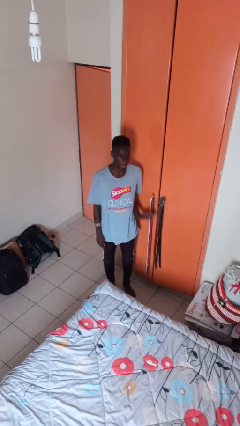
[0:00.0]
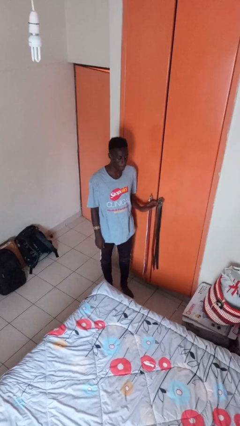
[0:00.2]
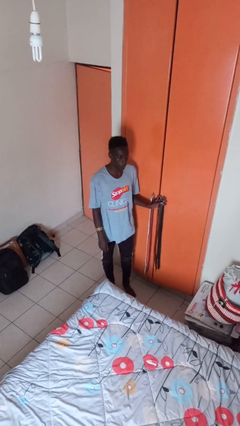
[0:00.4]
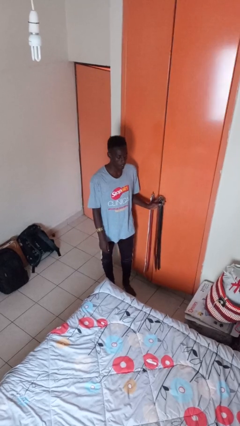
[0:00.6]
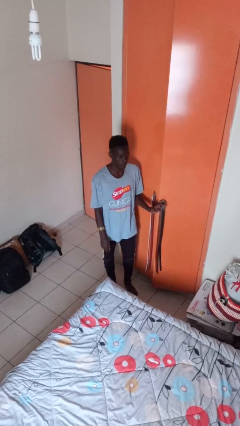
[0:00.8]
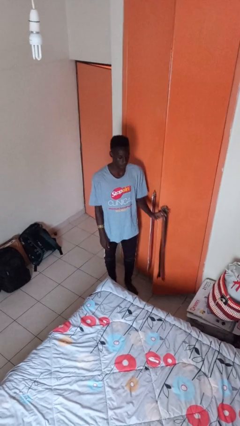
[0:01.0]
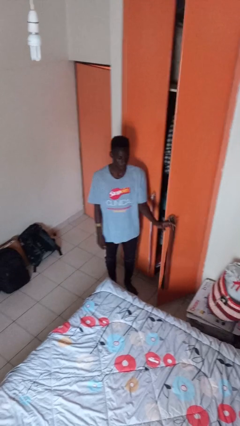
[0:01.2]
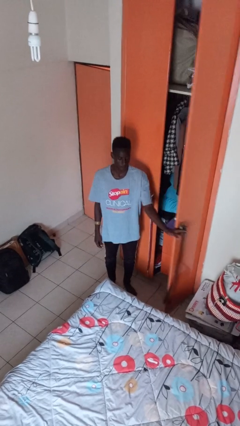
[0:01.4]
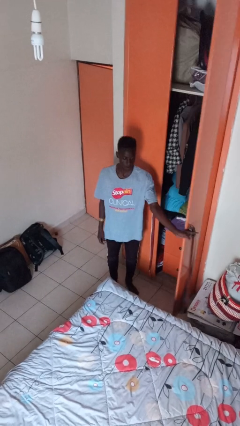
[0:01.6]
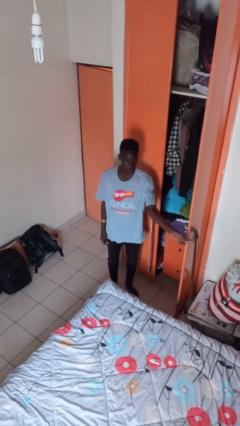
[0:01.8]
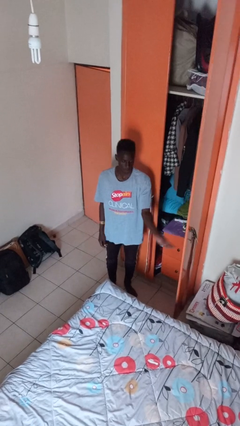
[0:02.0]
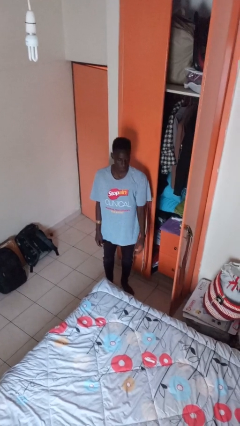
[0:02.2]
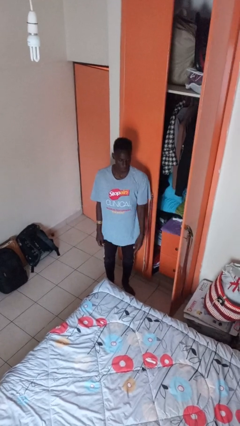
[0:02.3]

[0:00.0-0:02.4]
person opens closet door

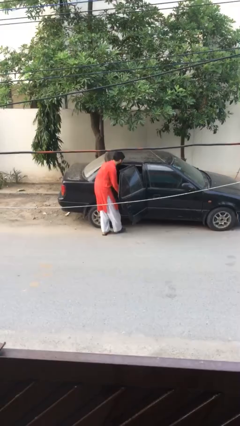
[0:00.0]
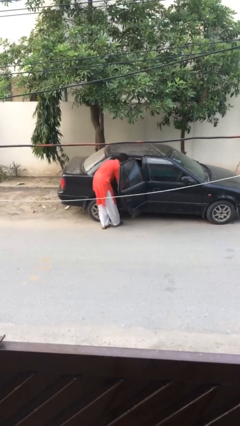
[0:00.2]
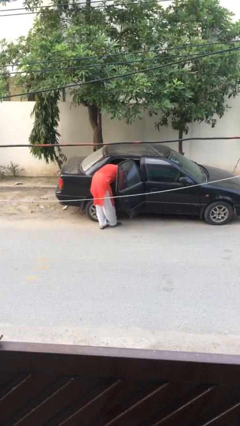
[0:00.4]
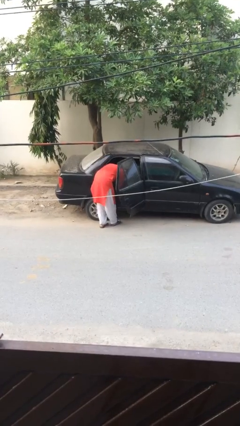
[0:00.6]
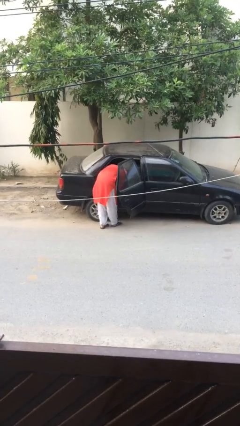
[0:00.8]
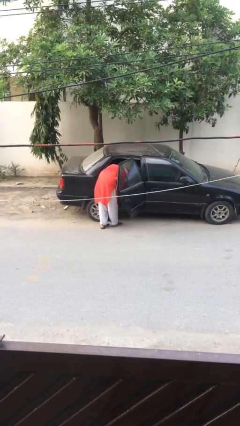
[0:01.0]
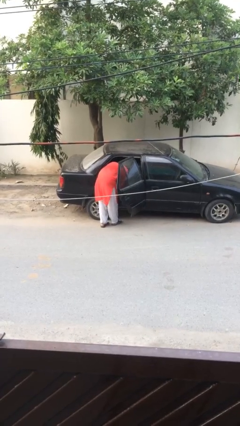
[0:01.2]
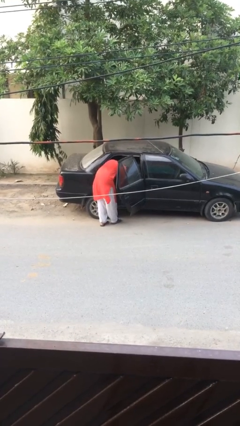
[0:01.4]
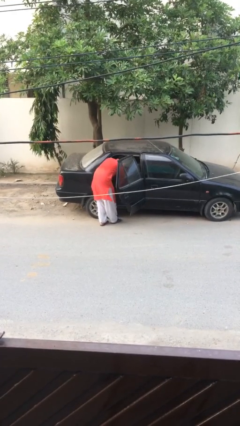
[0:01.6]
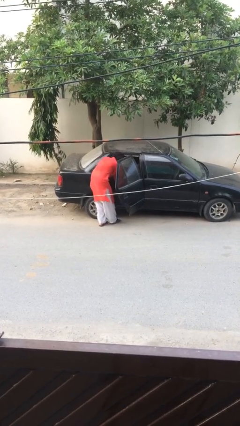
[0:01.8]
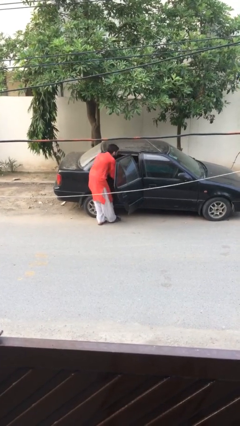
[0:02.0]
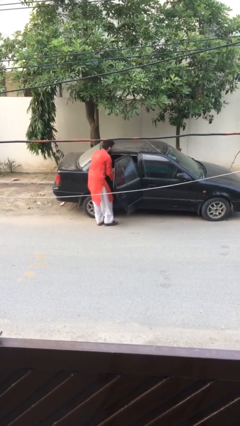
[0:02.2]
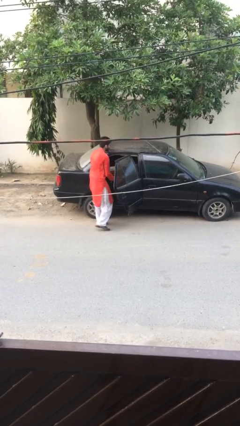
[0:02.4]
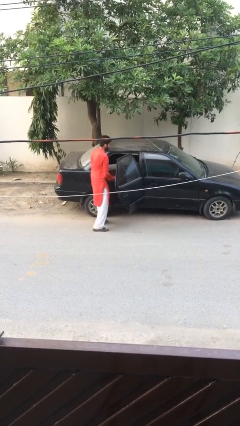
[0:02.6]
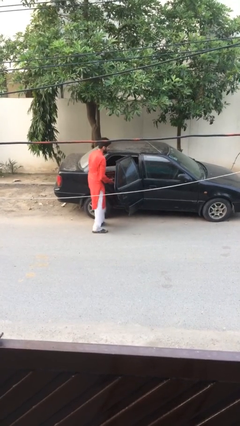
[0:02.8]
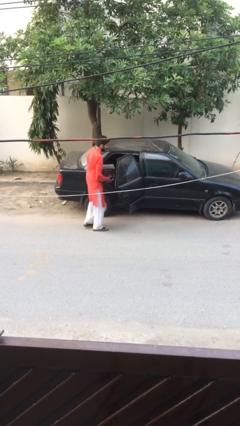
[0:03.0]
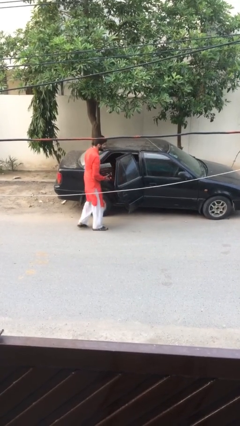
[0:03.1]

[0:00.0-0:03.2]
person unloads car

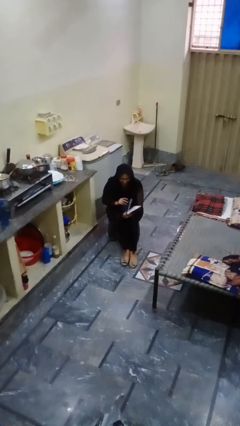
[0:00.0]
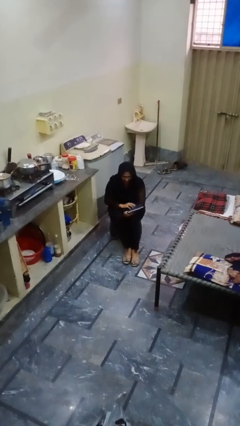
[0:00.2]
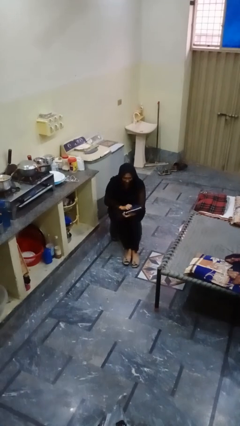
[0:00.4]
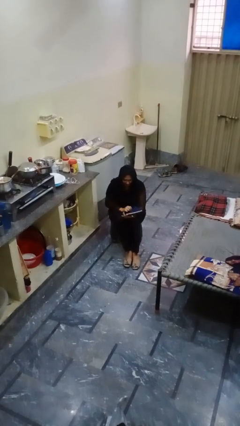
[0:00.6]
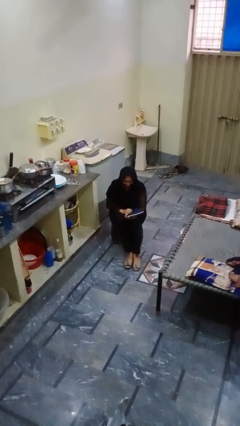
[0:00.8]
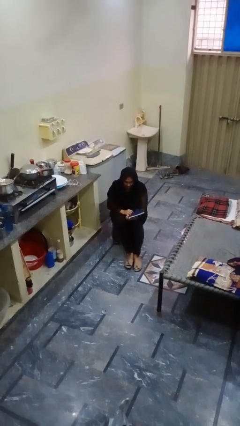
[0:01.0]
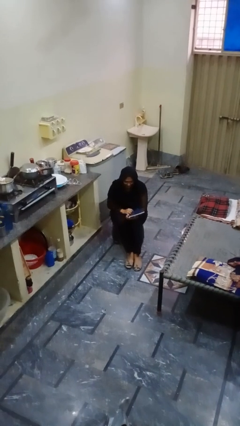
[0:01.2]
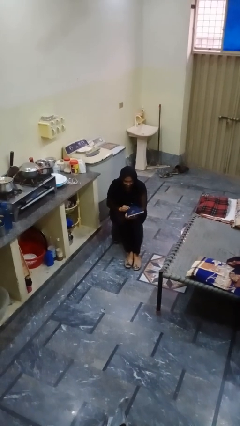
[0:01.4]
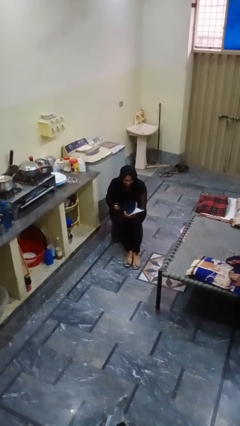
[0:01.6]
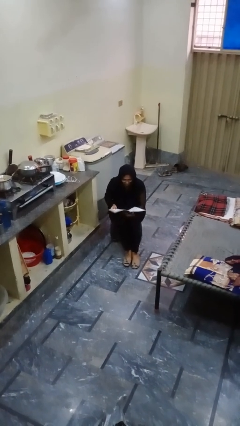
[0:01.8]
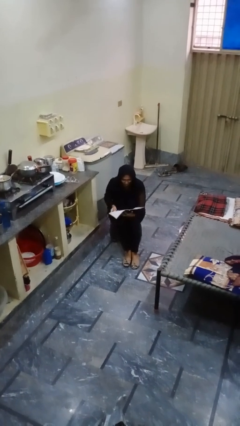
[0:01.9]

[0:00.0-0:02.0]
person reads magazine

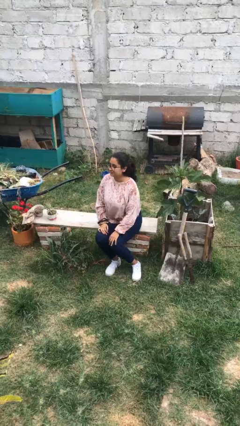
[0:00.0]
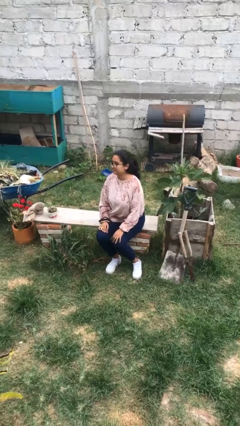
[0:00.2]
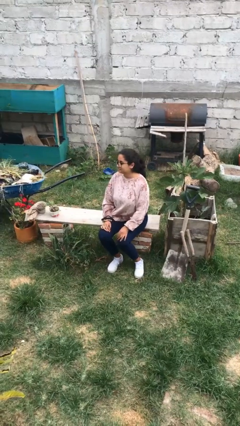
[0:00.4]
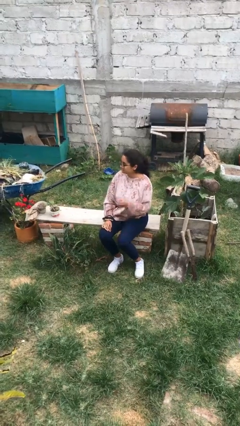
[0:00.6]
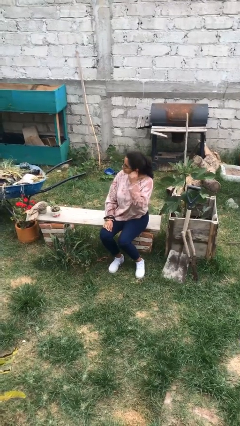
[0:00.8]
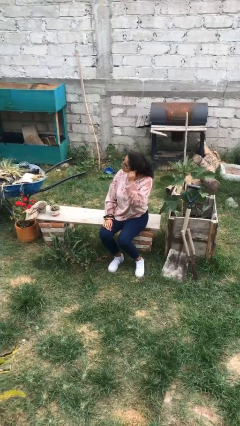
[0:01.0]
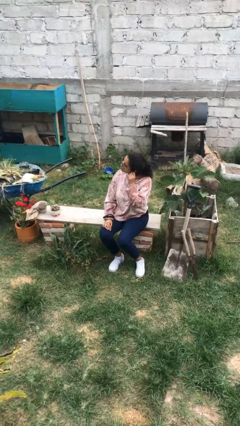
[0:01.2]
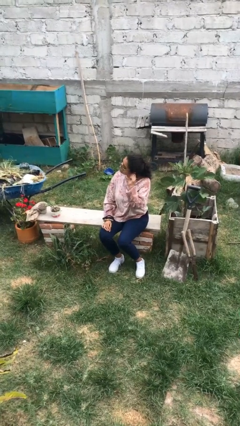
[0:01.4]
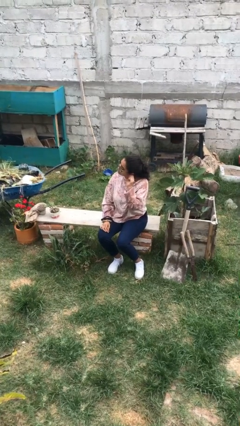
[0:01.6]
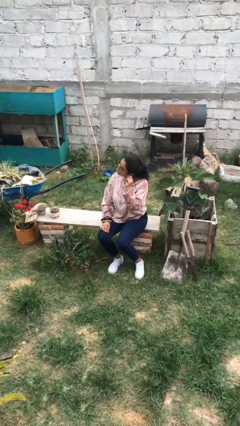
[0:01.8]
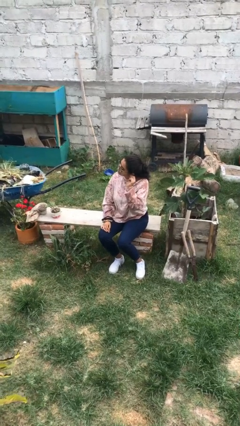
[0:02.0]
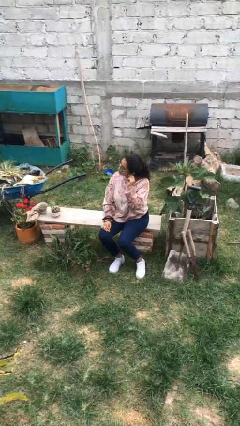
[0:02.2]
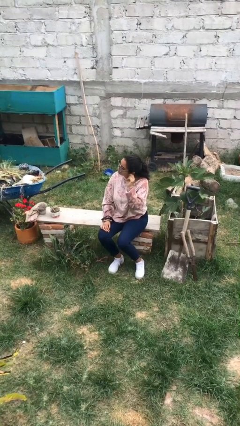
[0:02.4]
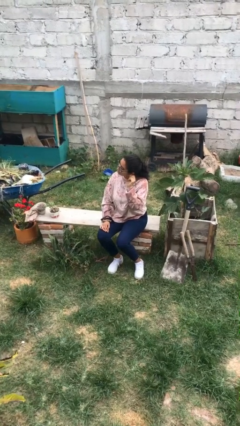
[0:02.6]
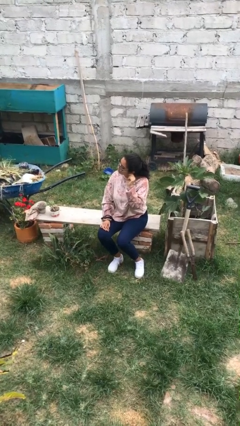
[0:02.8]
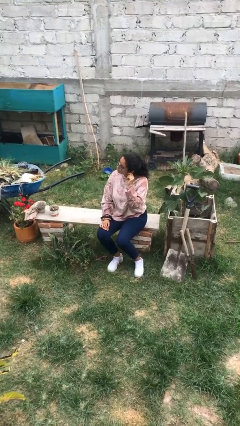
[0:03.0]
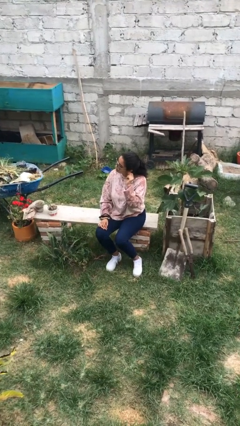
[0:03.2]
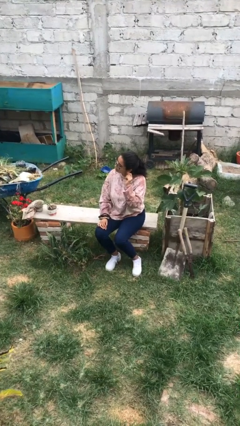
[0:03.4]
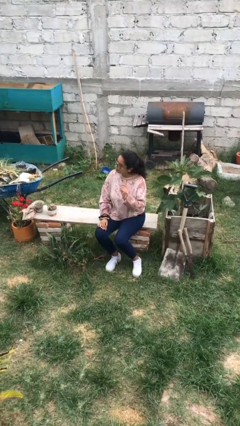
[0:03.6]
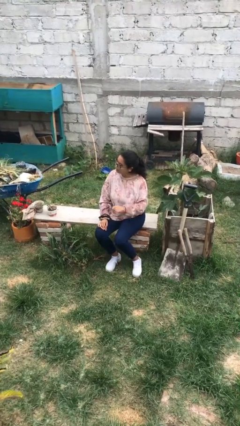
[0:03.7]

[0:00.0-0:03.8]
person touches earlobe

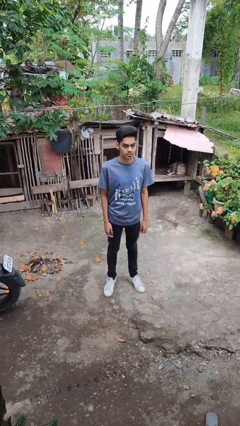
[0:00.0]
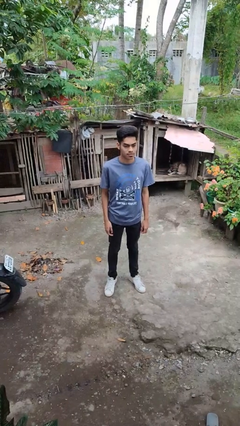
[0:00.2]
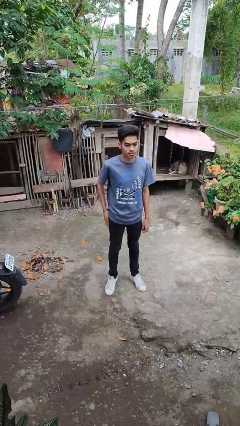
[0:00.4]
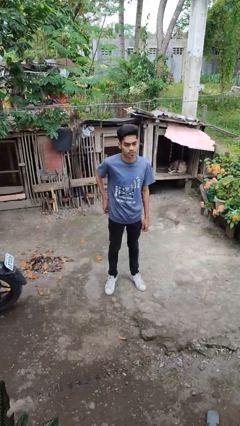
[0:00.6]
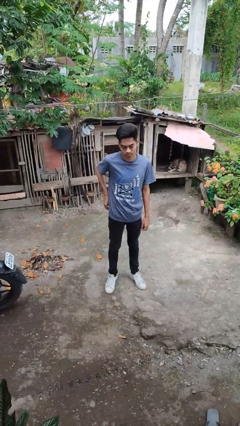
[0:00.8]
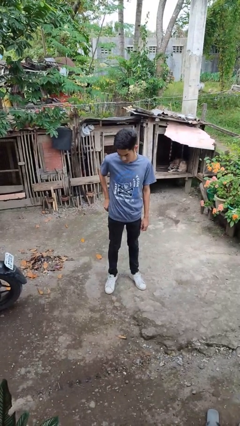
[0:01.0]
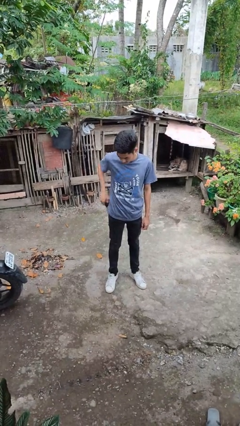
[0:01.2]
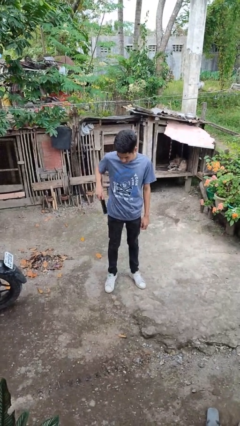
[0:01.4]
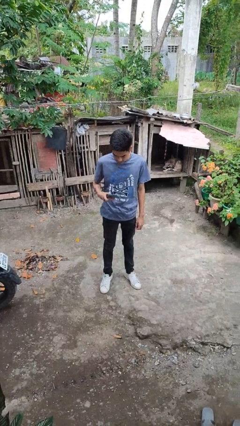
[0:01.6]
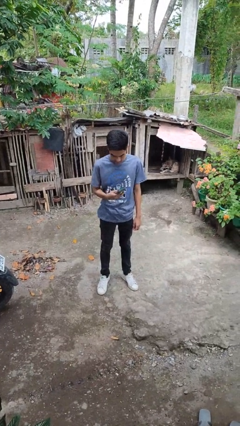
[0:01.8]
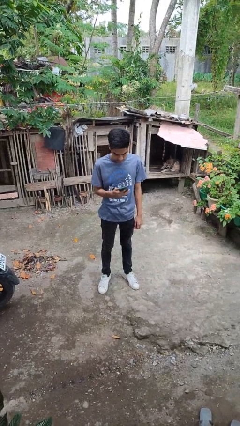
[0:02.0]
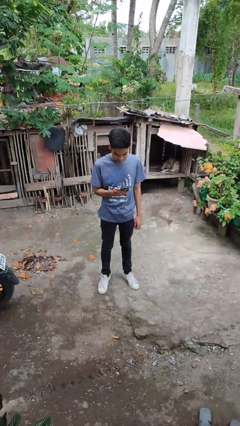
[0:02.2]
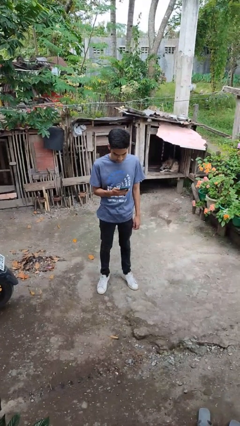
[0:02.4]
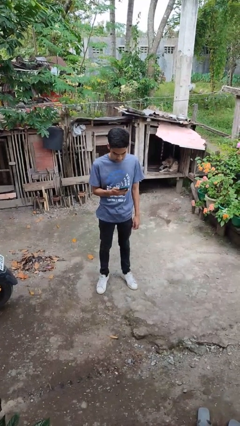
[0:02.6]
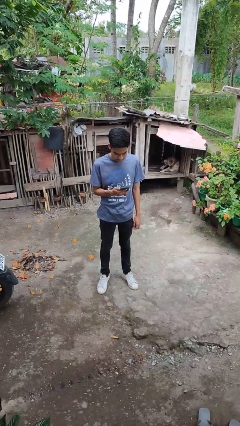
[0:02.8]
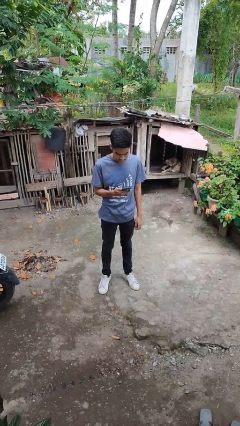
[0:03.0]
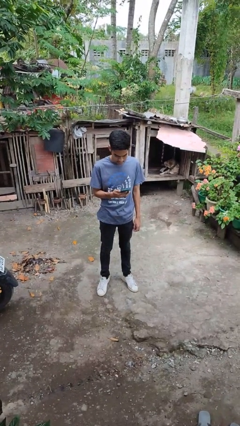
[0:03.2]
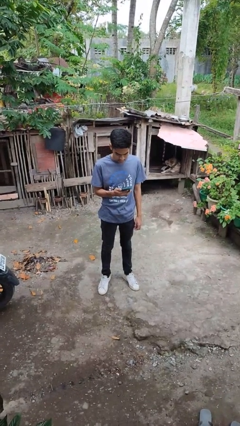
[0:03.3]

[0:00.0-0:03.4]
person takes phone from pocket

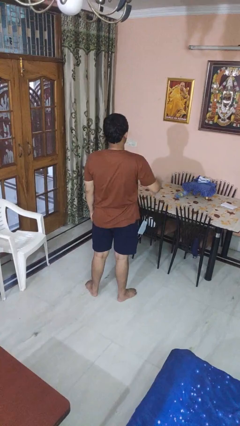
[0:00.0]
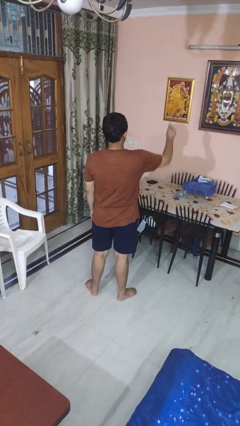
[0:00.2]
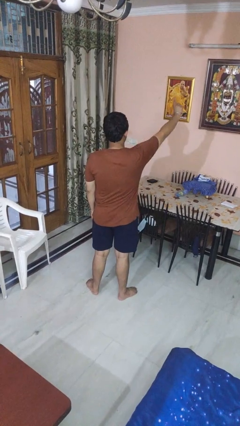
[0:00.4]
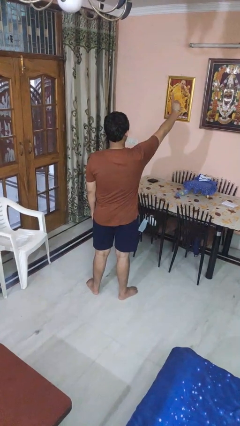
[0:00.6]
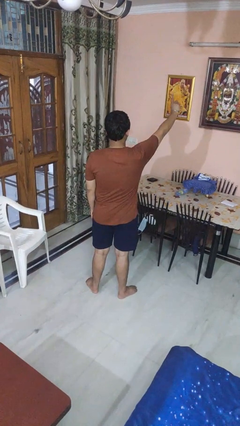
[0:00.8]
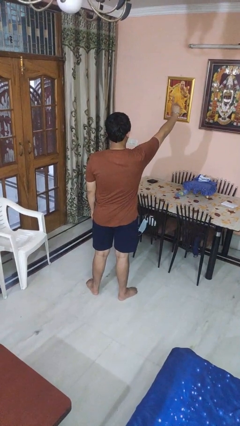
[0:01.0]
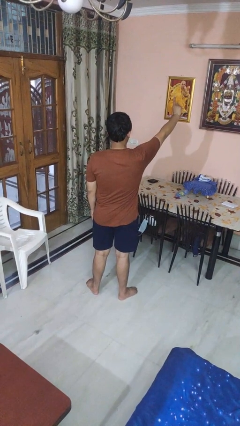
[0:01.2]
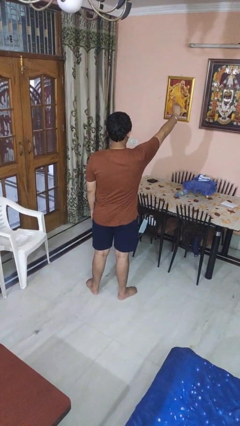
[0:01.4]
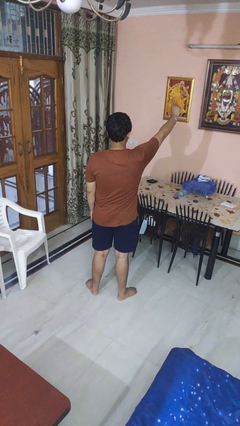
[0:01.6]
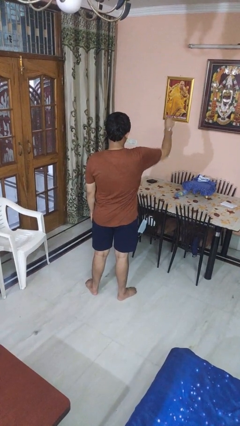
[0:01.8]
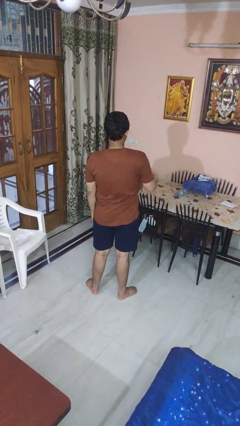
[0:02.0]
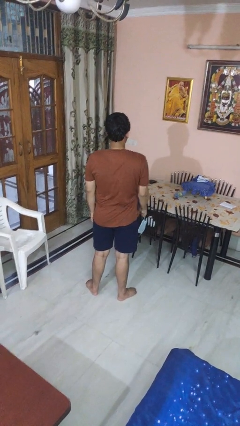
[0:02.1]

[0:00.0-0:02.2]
person gestures number one

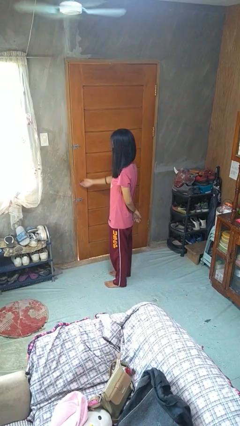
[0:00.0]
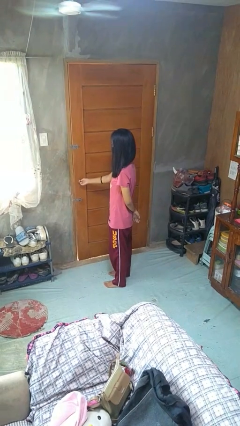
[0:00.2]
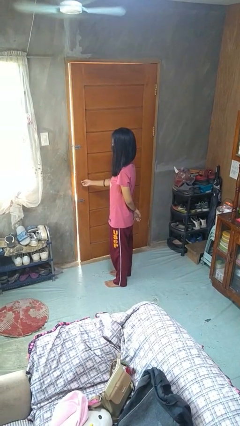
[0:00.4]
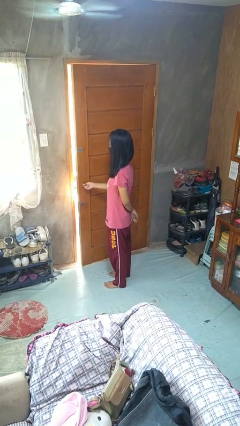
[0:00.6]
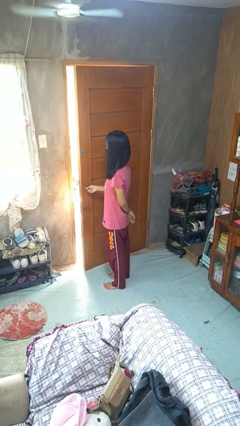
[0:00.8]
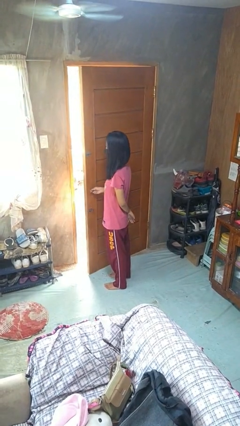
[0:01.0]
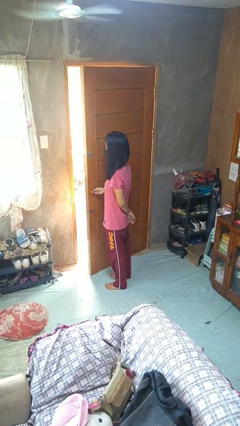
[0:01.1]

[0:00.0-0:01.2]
person opens facility door
